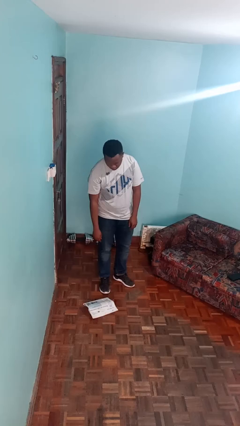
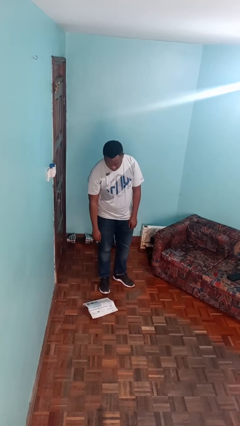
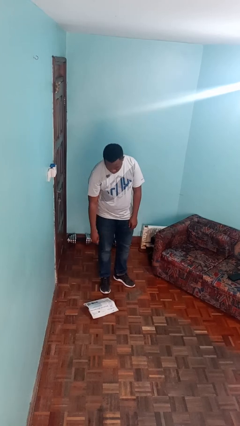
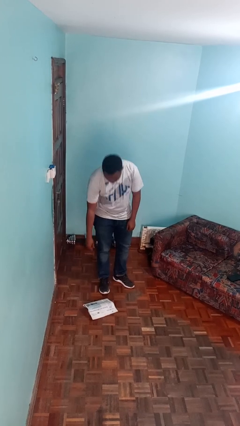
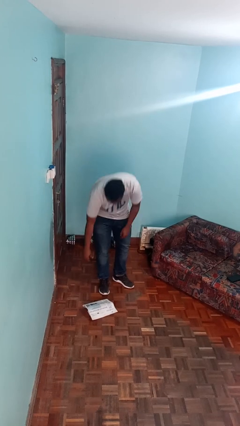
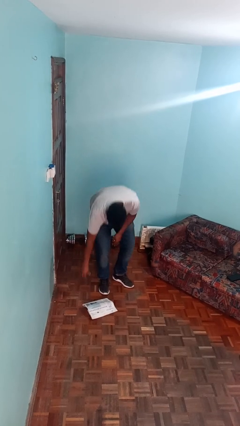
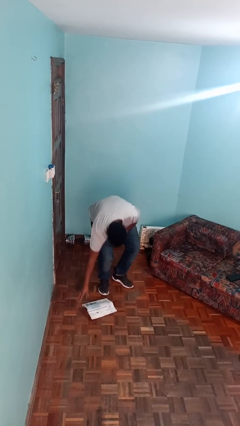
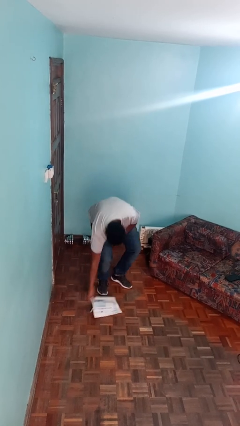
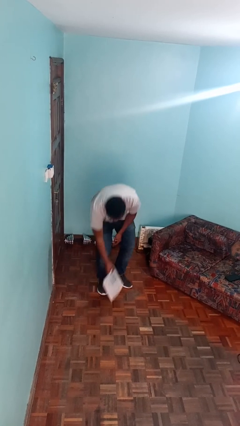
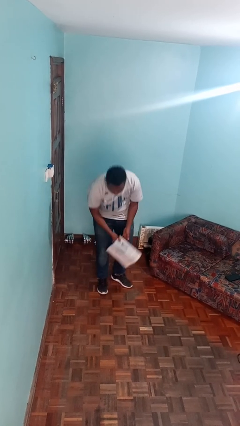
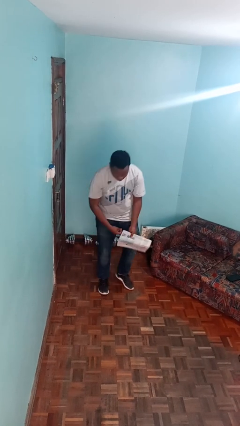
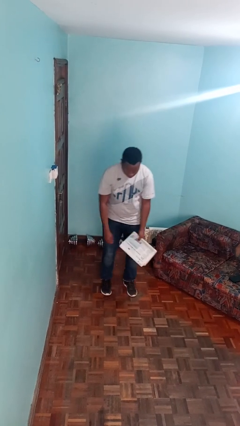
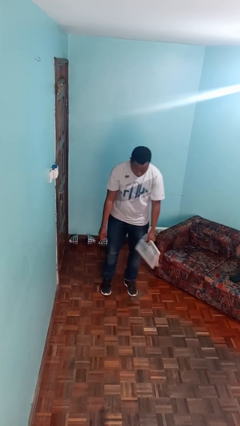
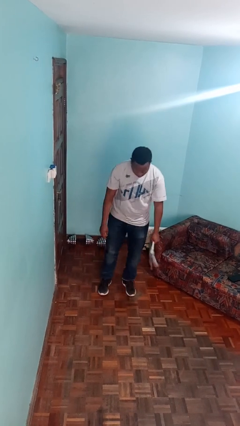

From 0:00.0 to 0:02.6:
person picks up object from floor

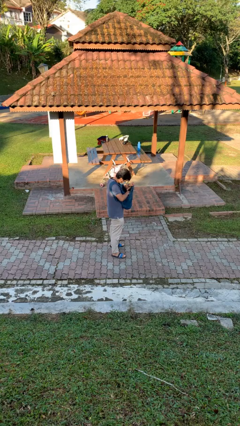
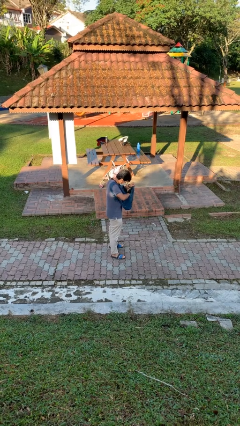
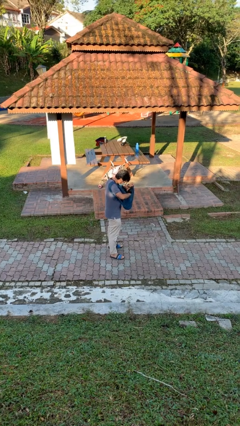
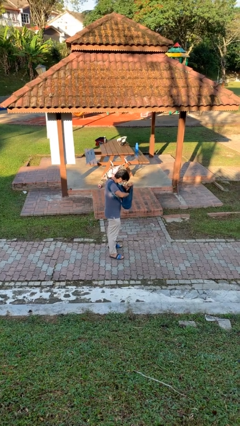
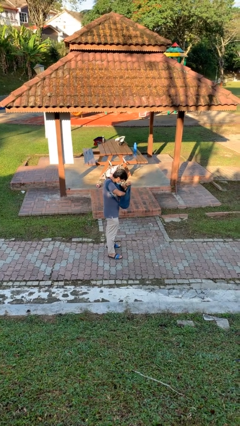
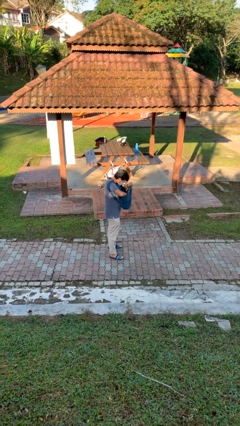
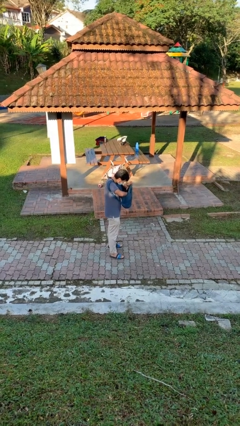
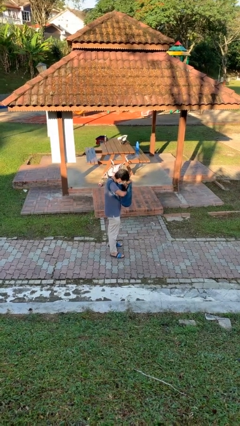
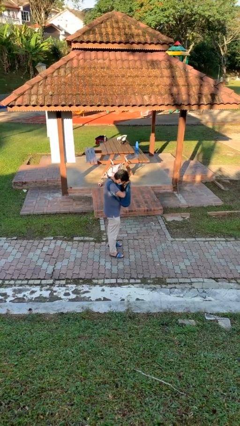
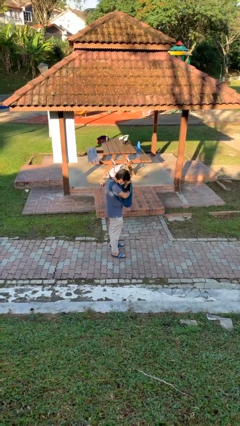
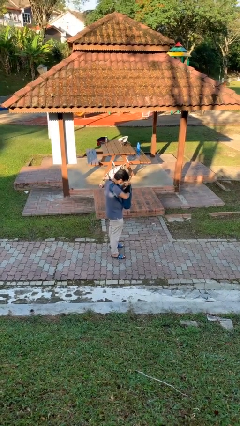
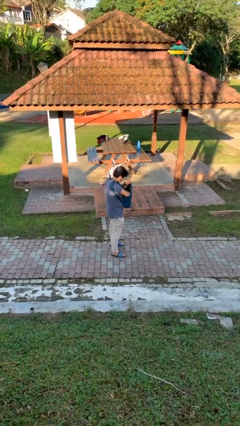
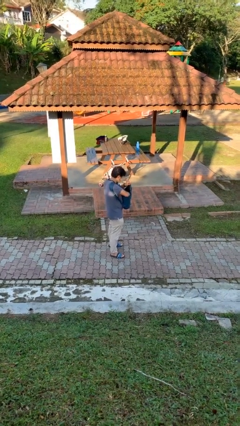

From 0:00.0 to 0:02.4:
person searches in backpack

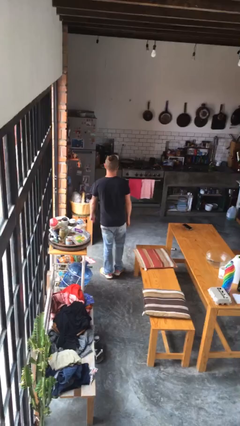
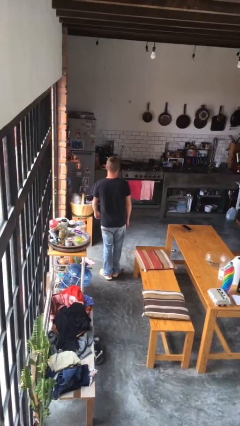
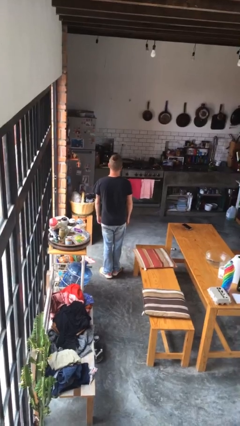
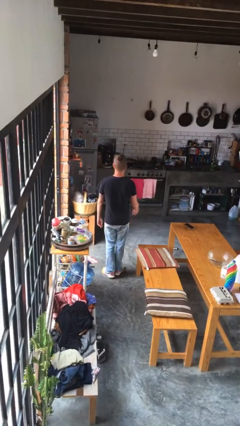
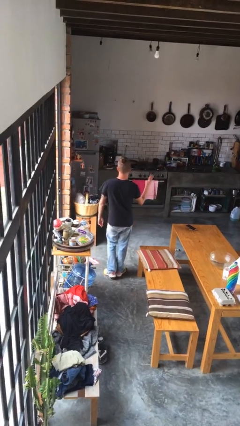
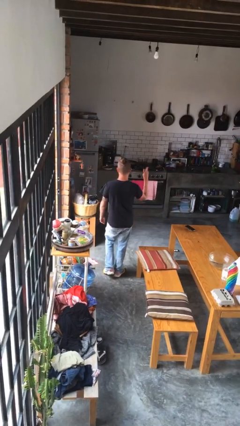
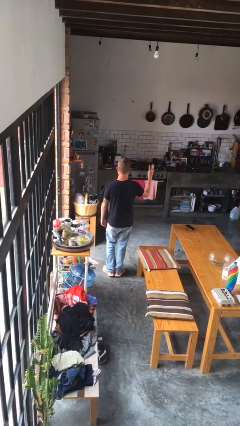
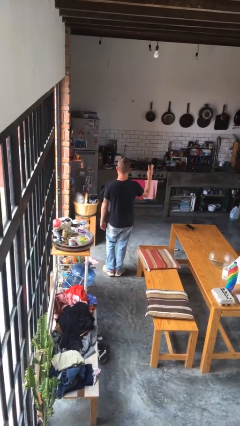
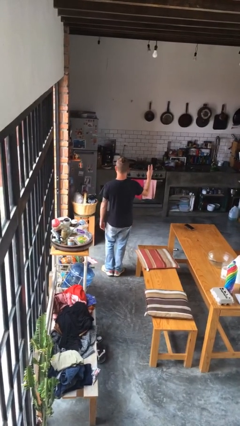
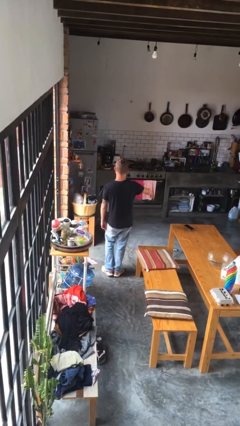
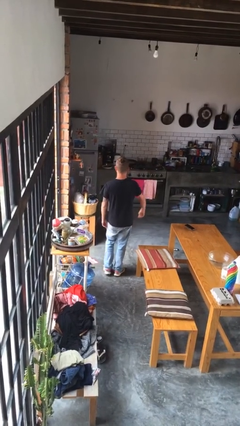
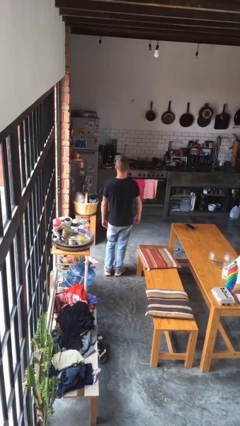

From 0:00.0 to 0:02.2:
person gestures number three

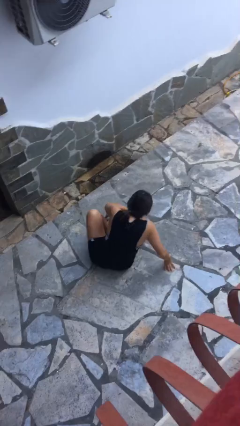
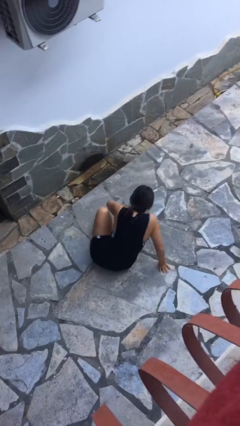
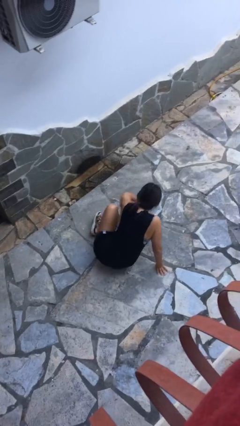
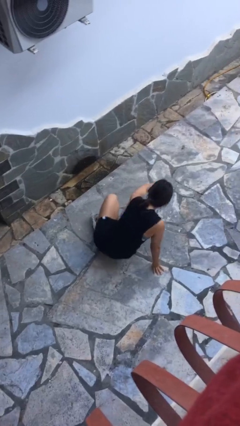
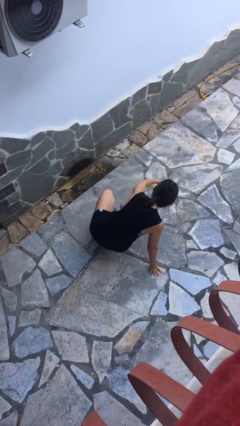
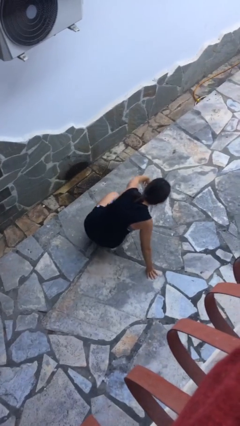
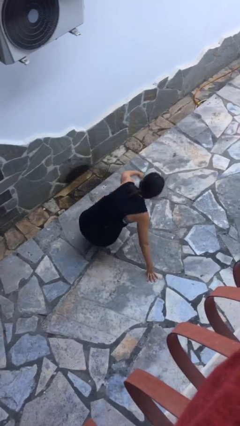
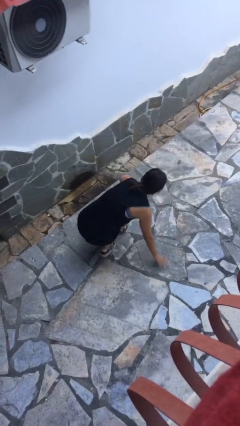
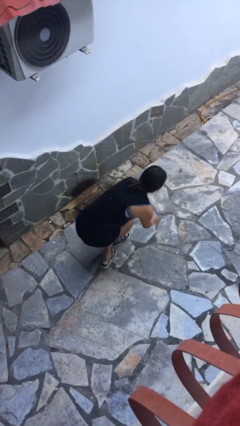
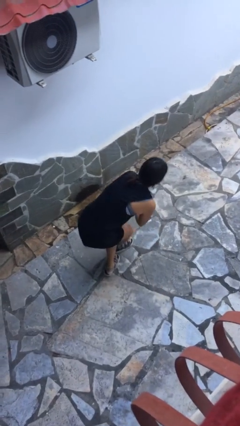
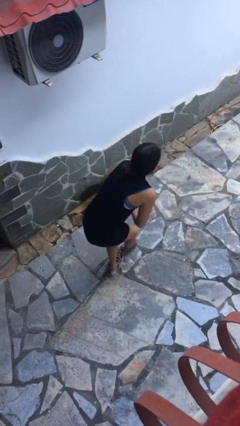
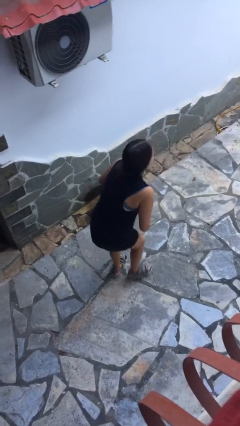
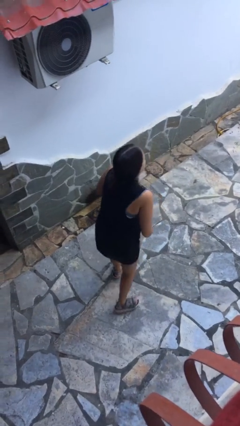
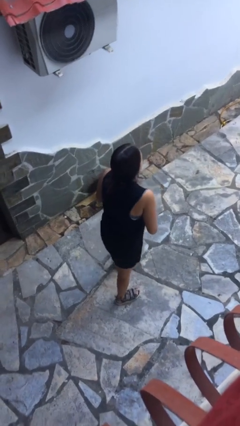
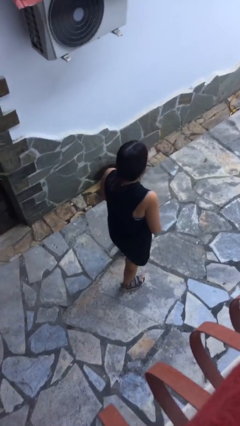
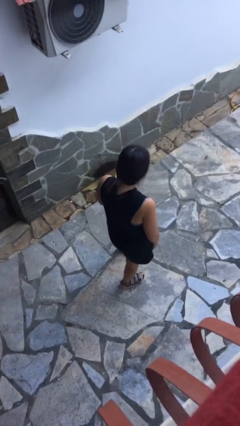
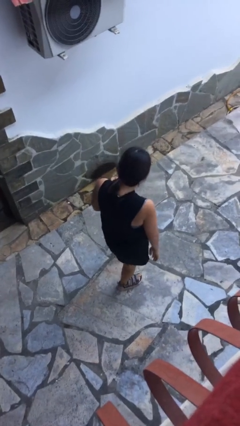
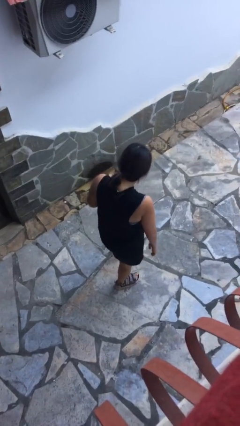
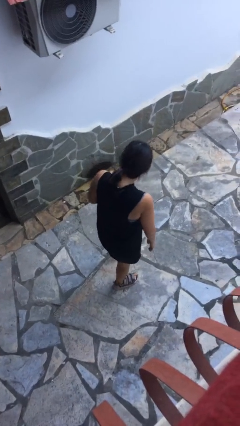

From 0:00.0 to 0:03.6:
person stands up from floor

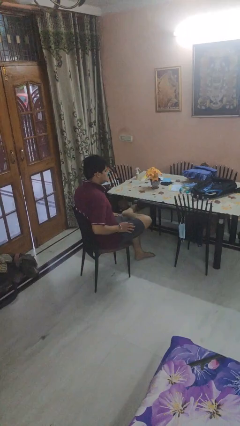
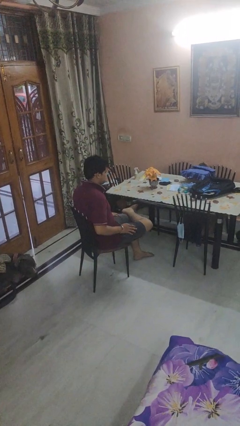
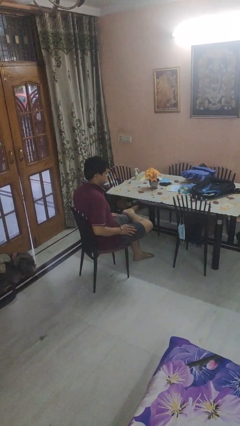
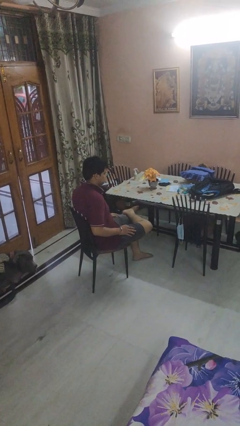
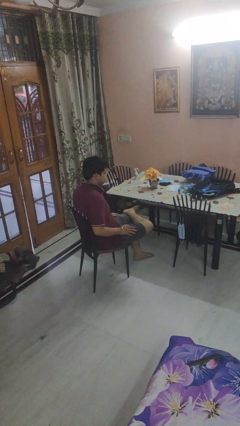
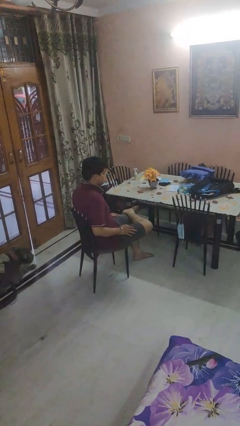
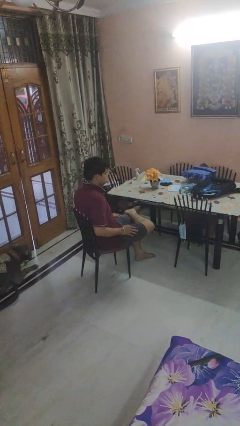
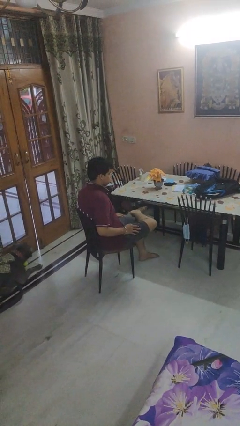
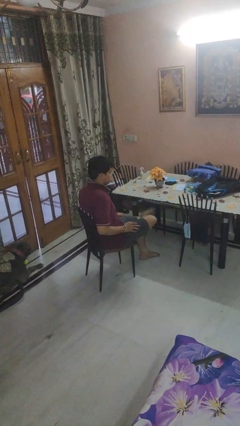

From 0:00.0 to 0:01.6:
person crosses legs

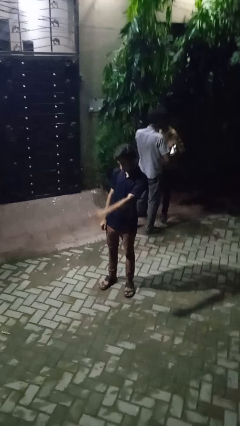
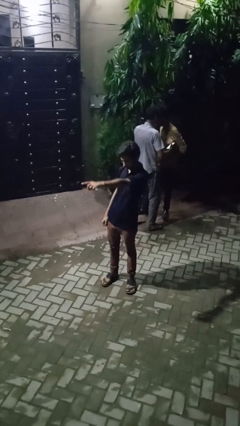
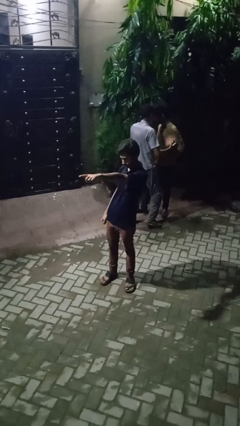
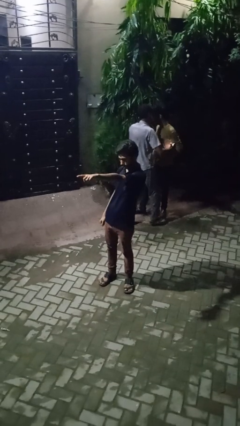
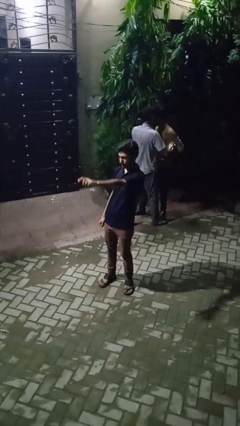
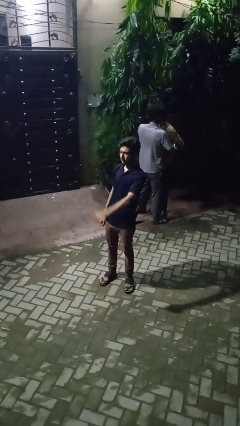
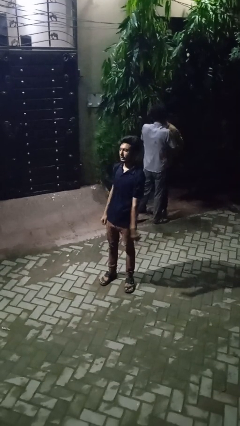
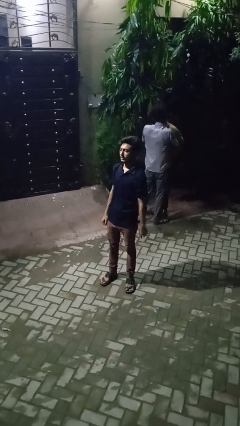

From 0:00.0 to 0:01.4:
person points at person

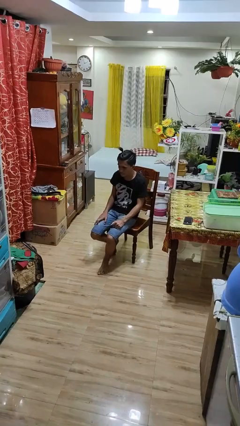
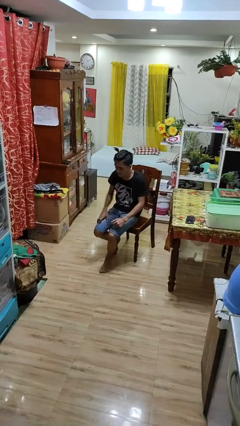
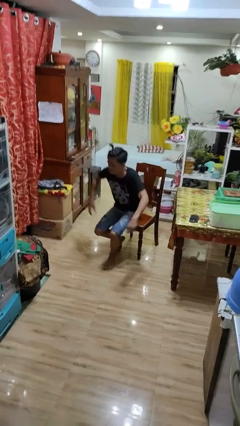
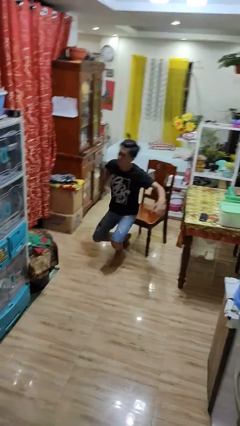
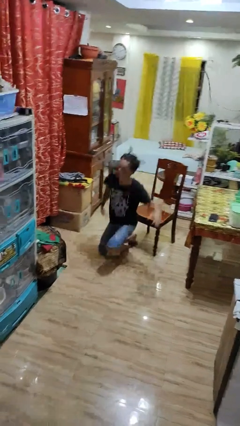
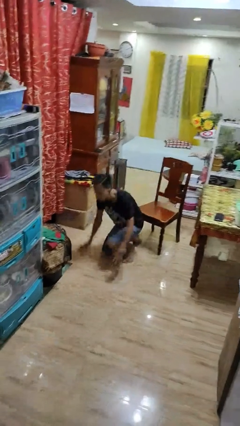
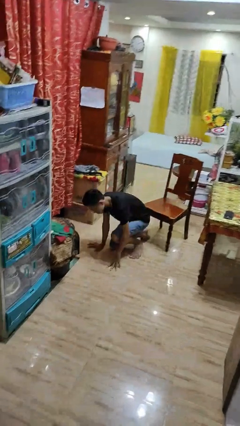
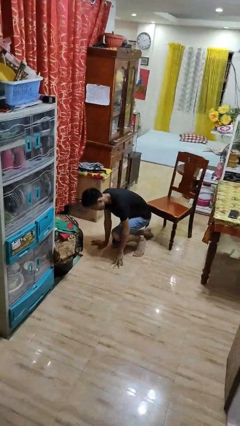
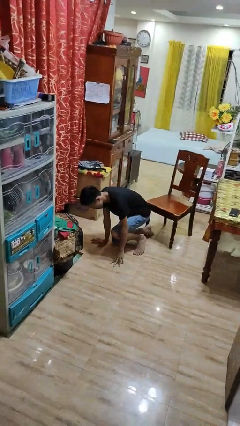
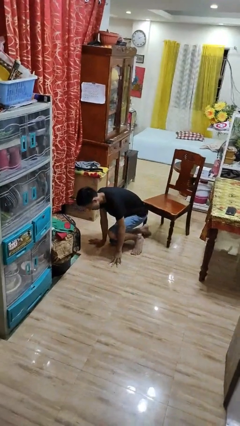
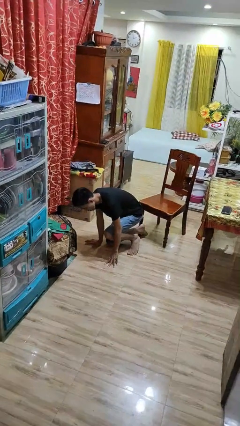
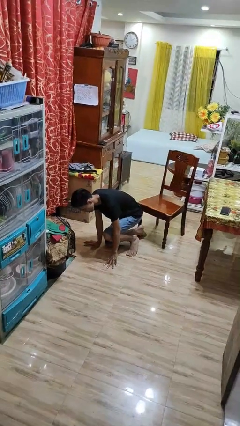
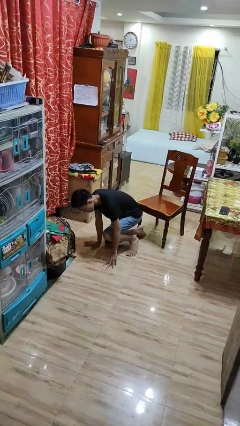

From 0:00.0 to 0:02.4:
person falls from chair

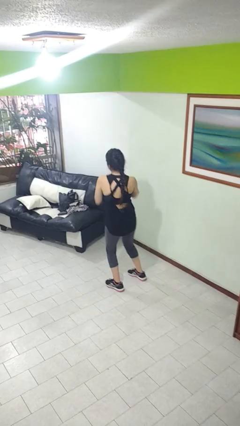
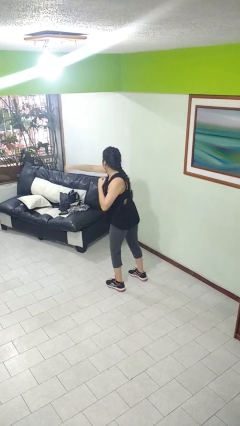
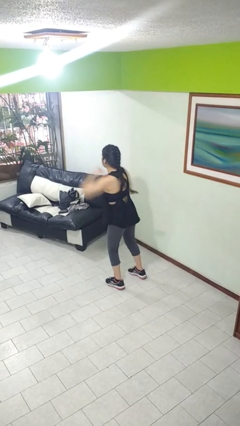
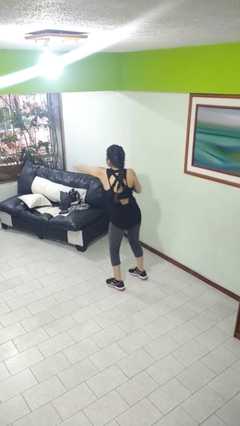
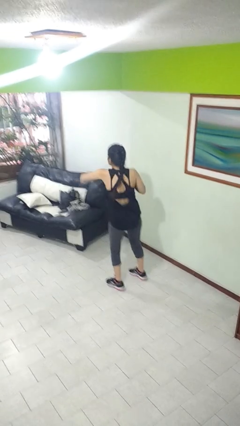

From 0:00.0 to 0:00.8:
person karate chop
